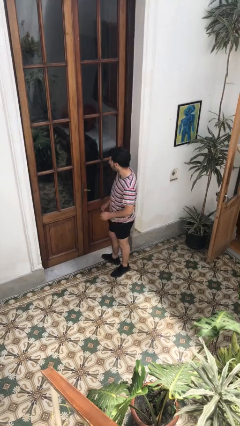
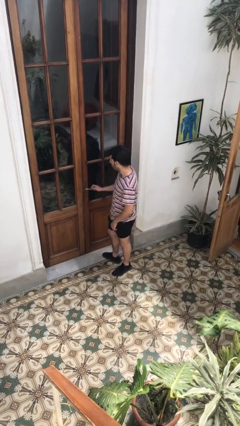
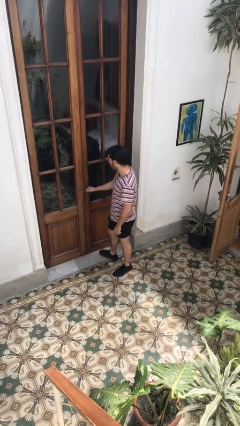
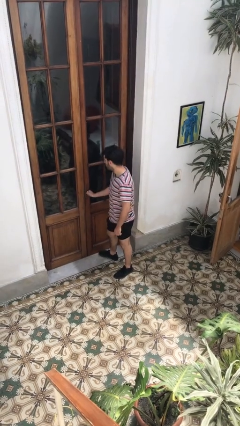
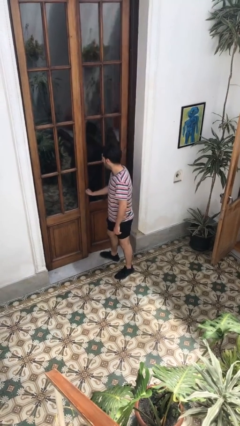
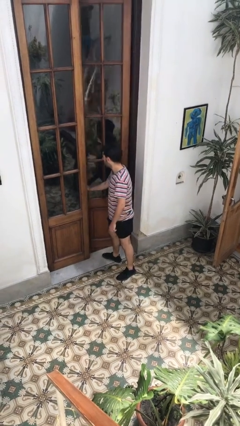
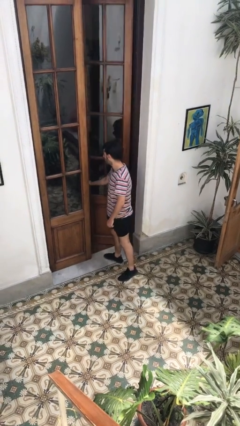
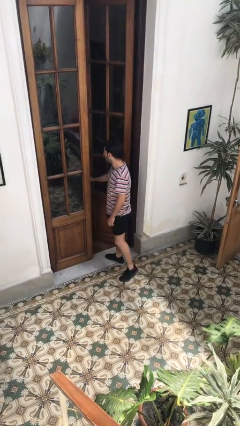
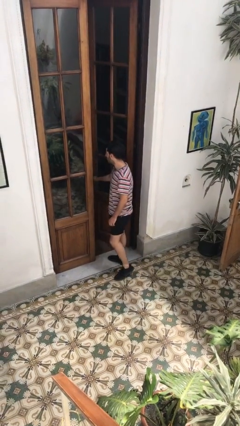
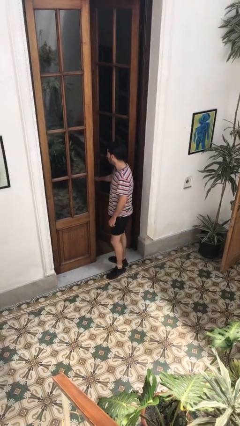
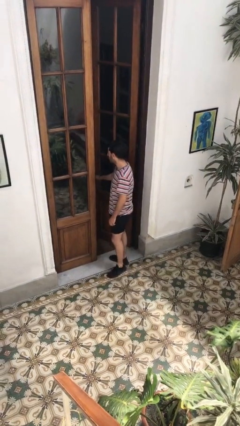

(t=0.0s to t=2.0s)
person opens facility door

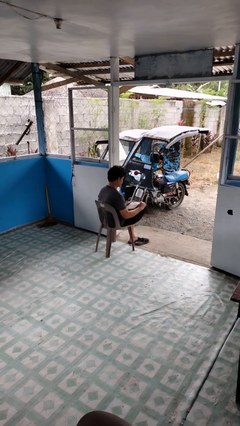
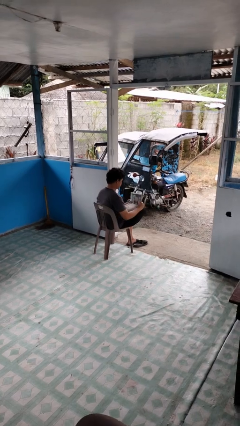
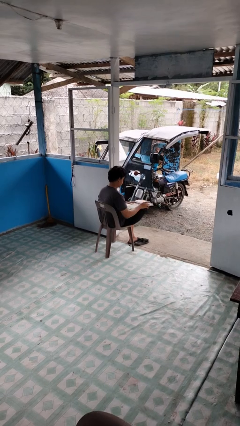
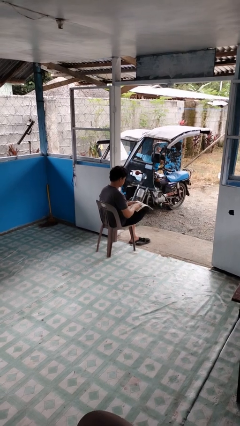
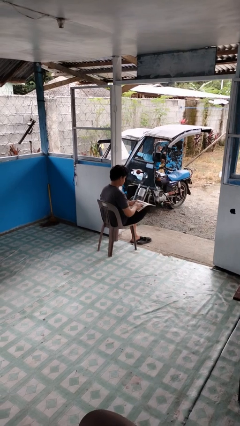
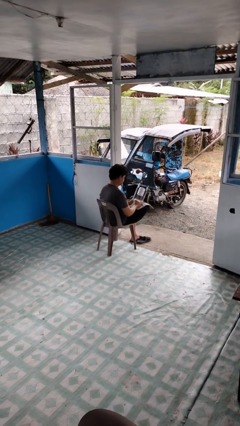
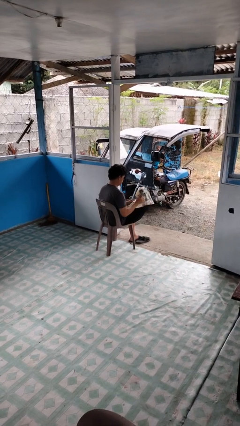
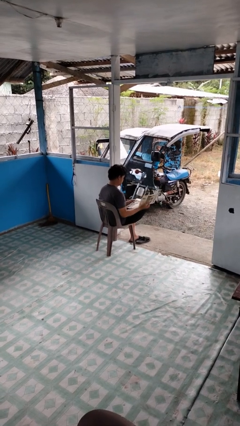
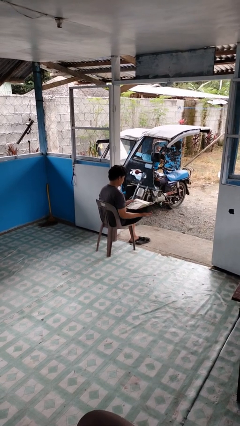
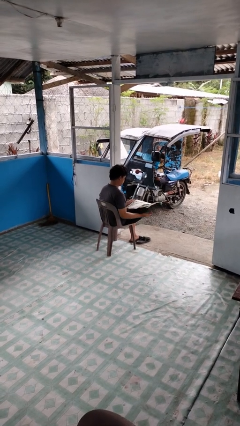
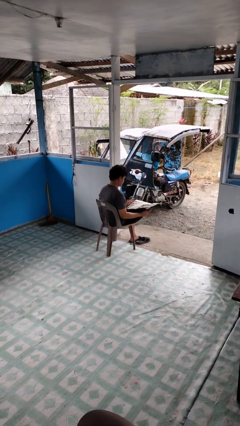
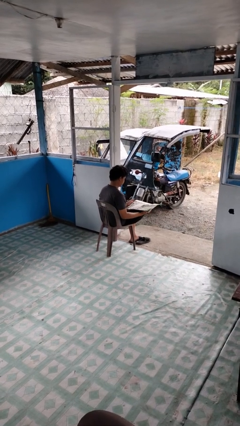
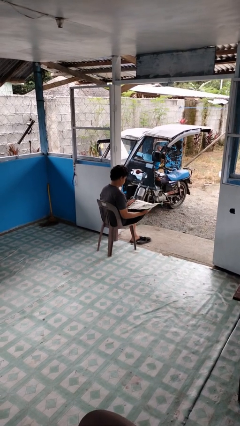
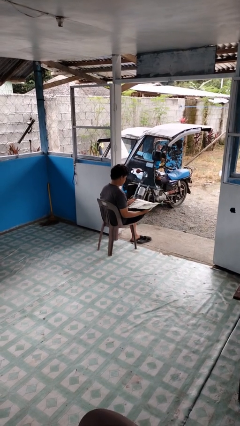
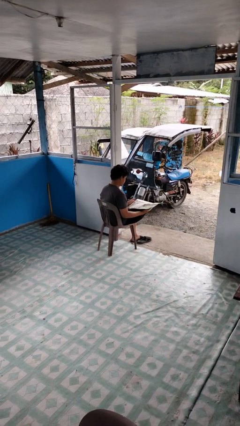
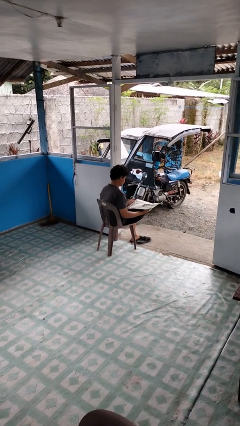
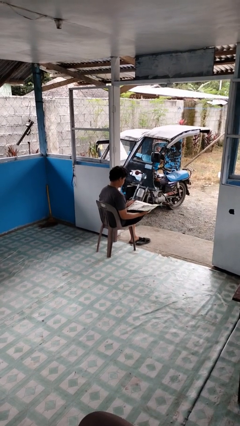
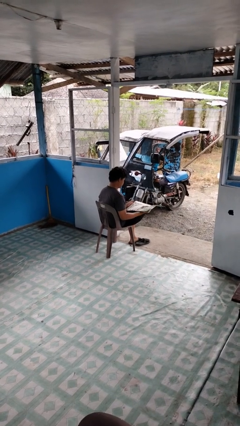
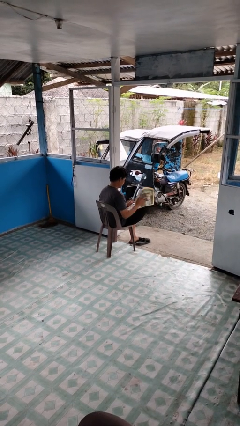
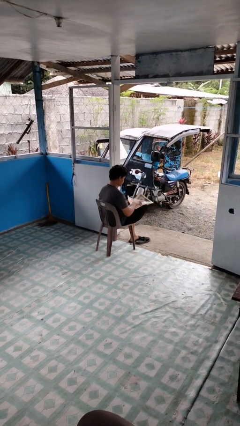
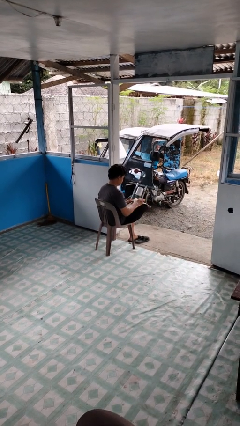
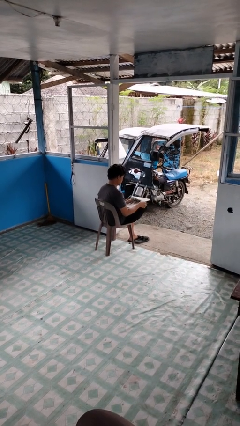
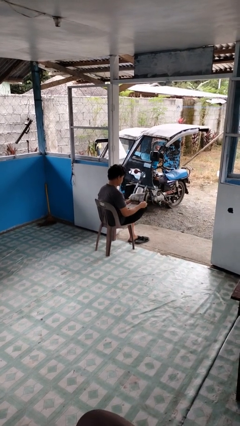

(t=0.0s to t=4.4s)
person reads newspaper

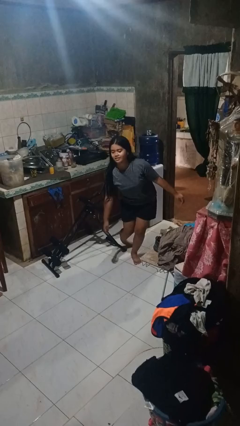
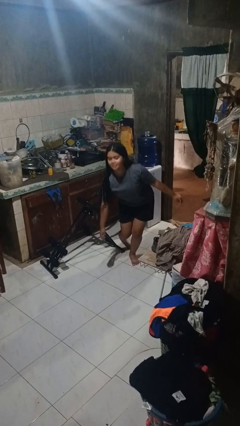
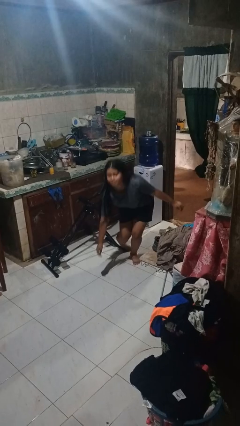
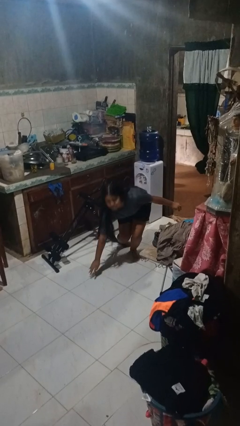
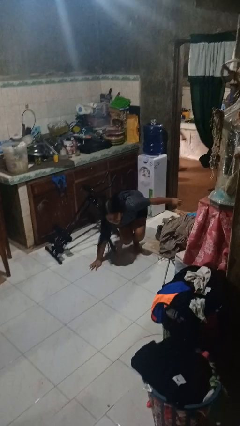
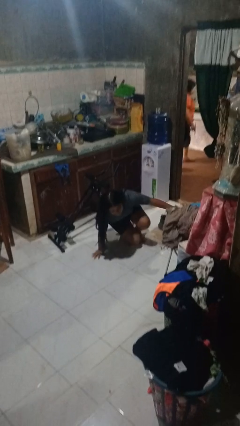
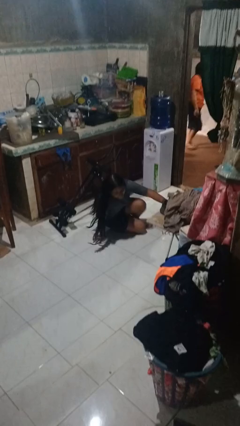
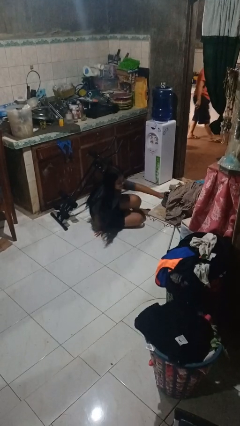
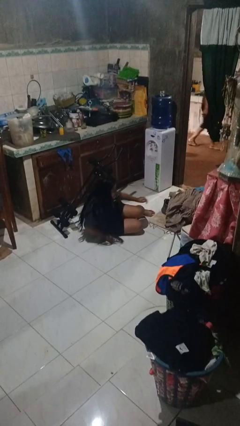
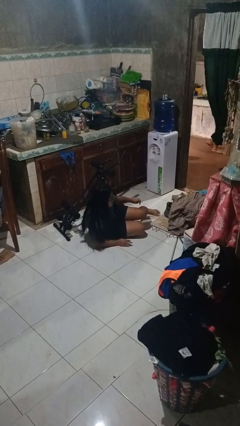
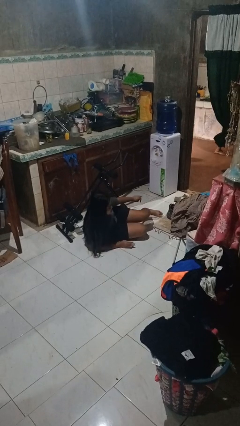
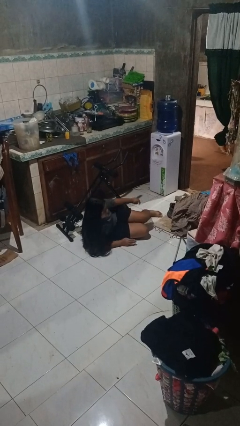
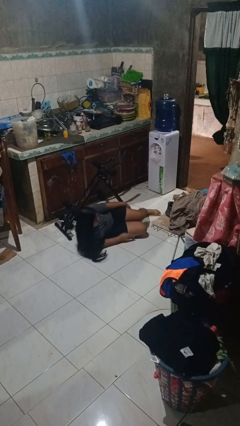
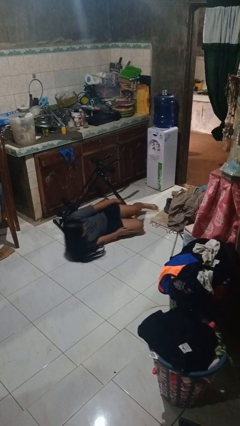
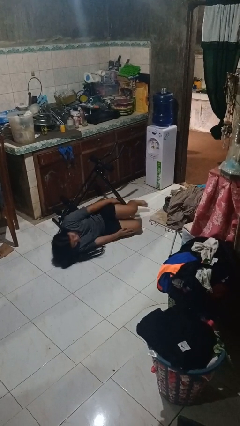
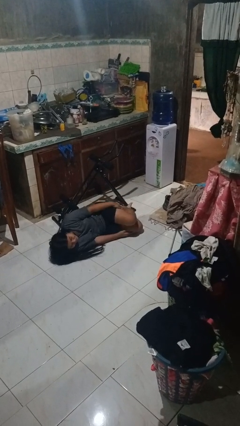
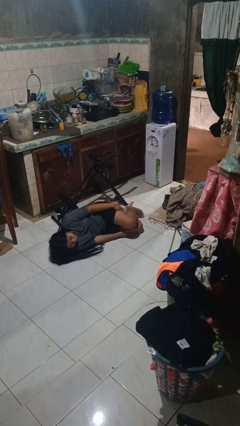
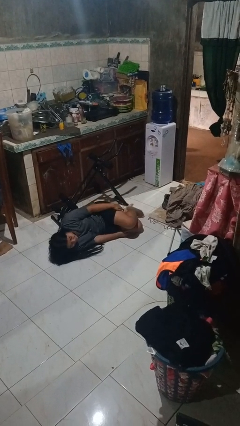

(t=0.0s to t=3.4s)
person lies down on floor

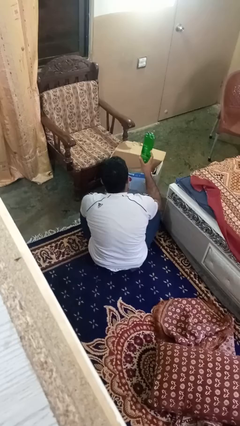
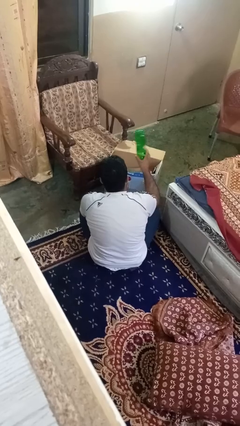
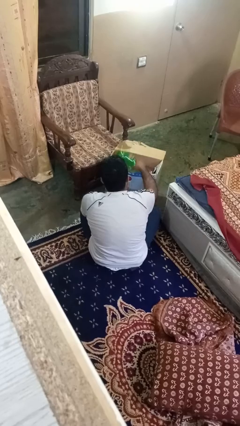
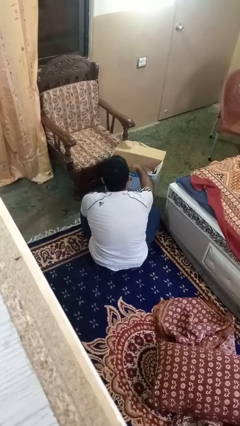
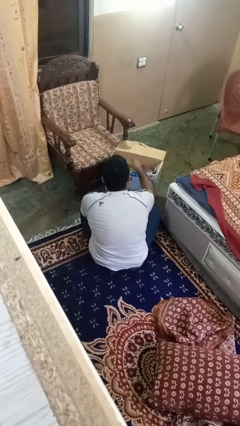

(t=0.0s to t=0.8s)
person puts object into box

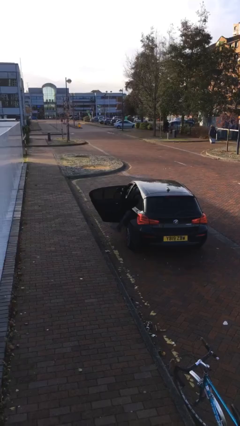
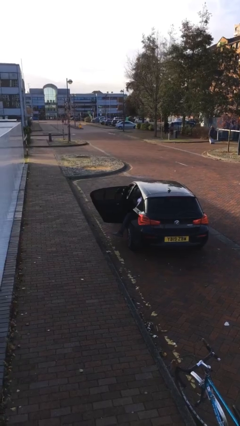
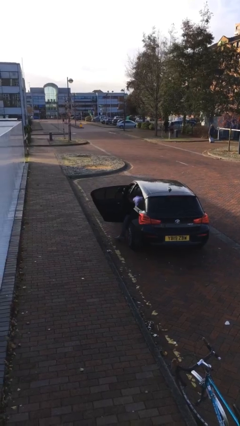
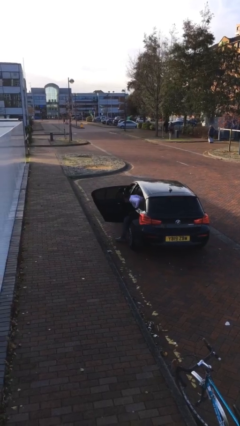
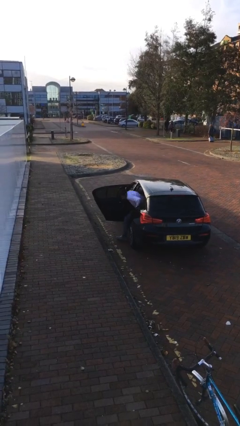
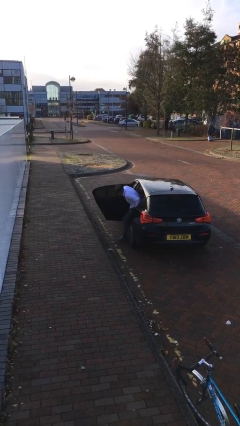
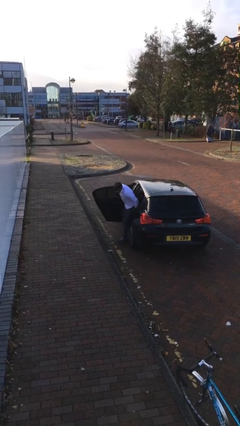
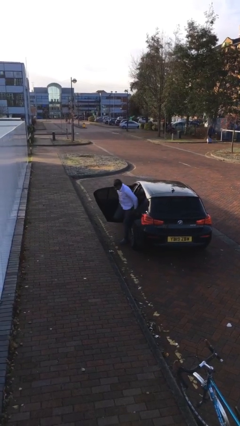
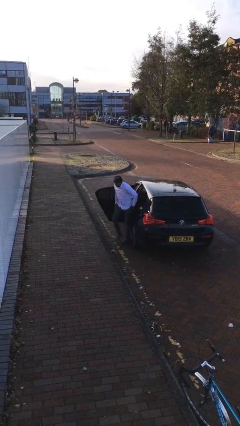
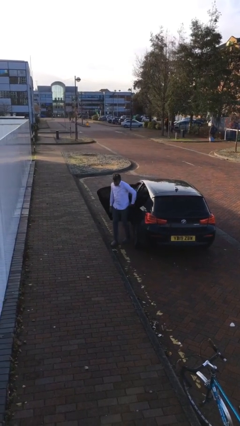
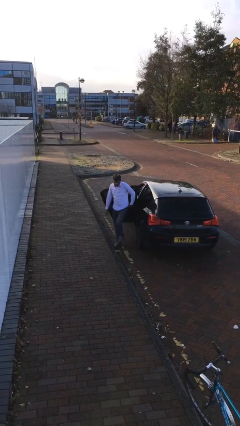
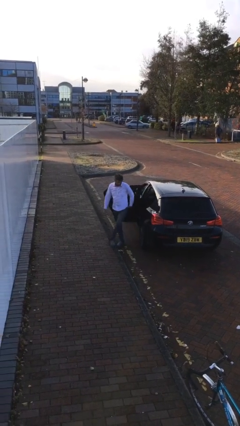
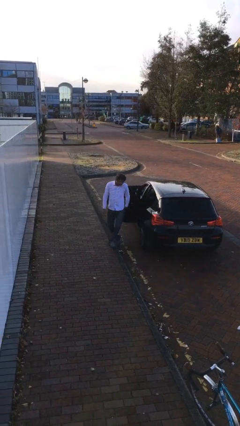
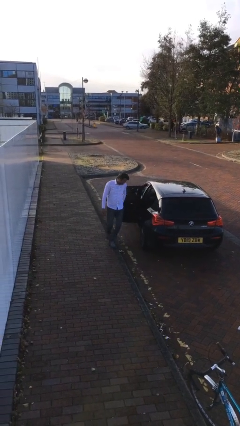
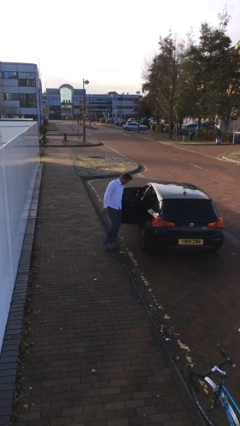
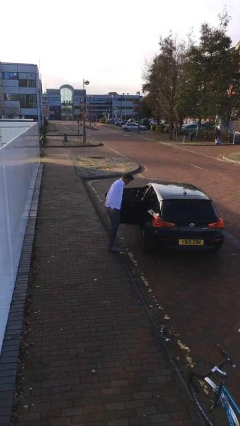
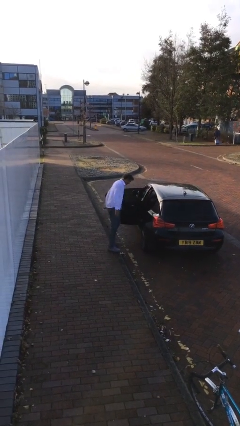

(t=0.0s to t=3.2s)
person exits car

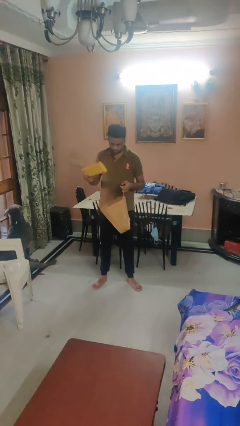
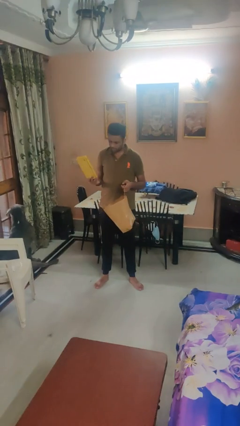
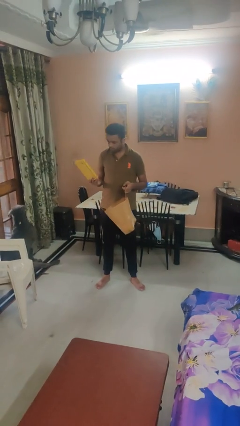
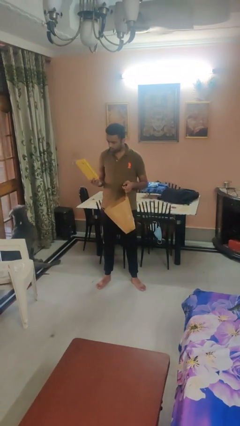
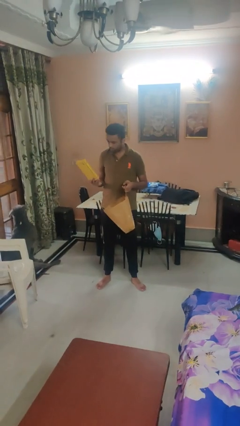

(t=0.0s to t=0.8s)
person takes object from bag

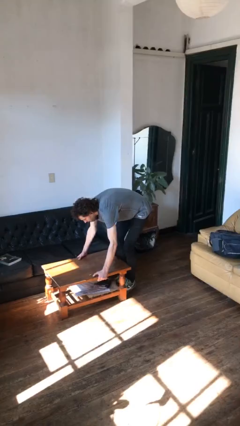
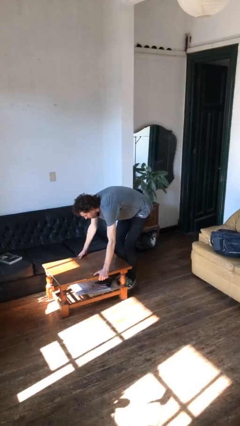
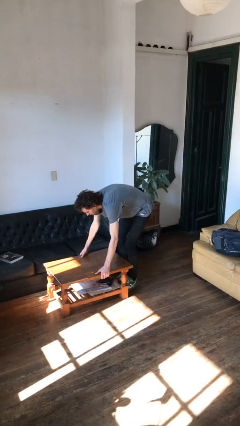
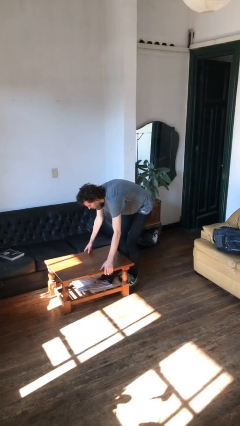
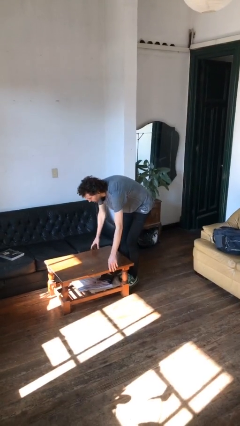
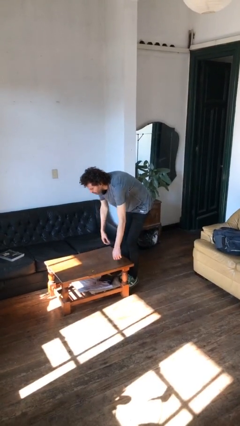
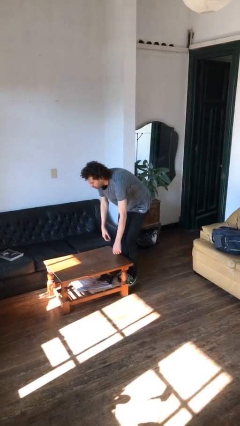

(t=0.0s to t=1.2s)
person puts down object on floor

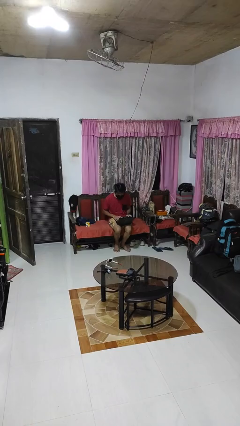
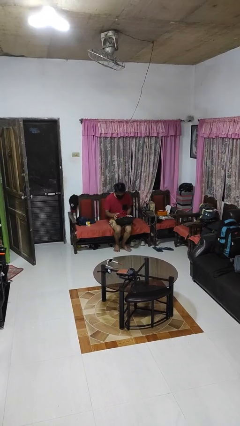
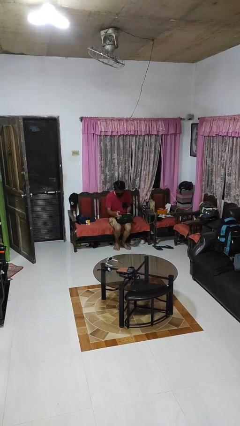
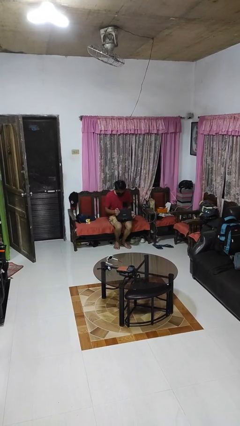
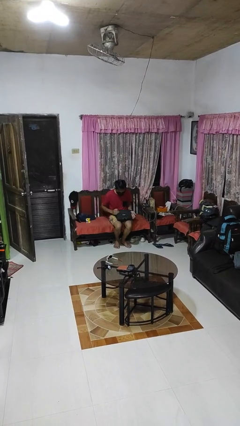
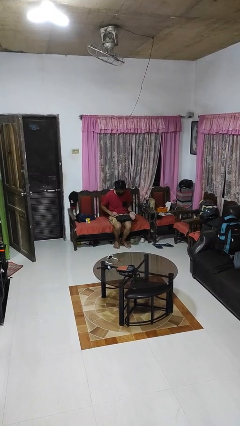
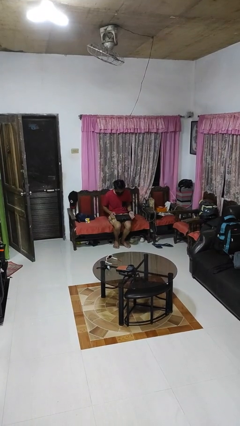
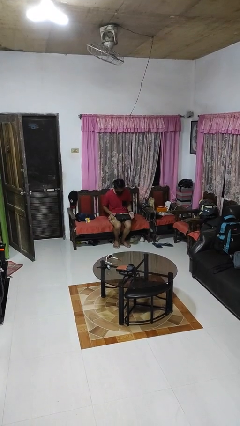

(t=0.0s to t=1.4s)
person closes laptop
